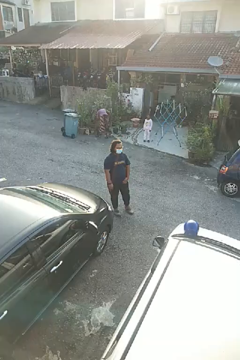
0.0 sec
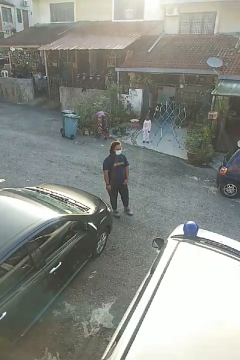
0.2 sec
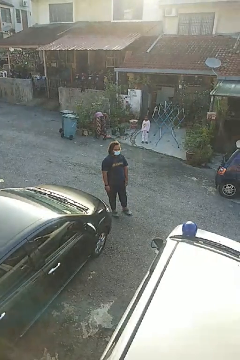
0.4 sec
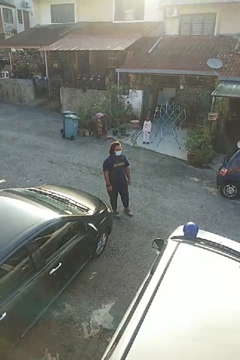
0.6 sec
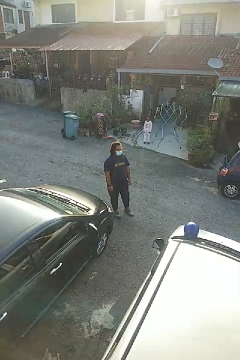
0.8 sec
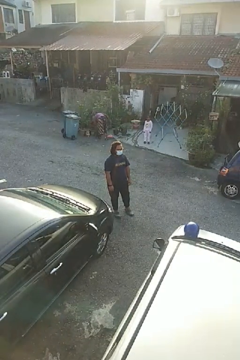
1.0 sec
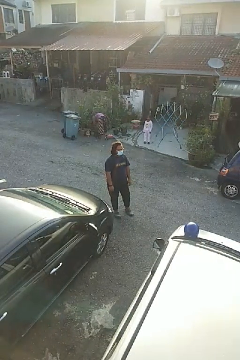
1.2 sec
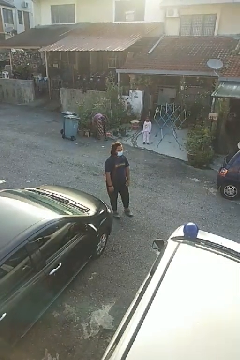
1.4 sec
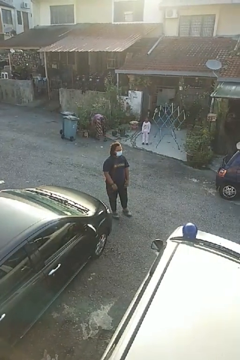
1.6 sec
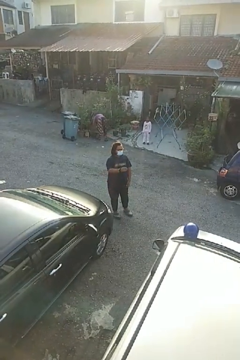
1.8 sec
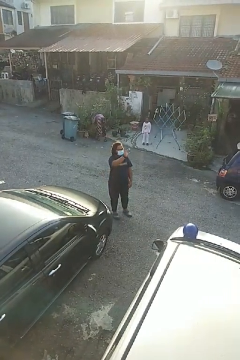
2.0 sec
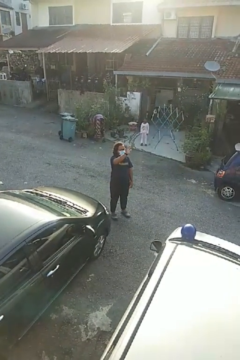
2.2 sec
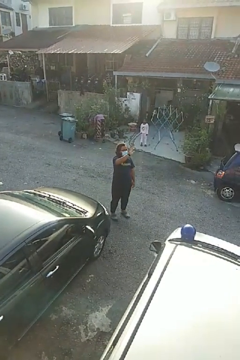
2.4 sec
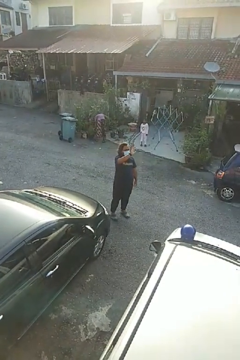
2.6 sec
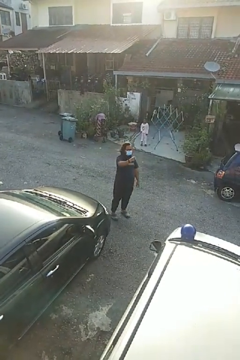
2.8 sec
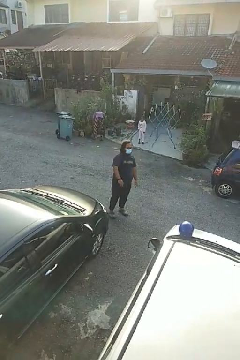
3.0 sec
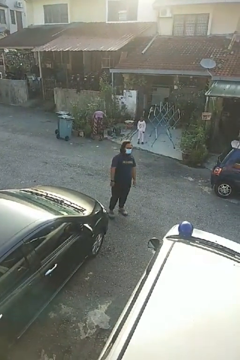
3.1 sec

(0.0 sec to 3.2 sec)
person waves at person

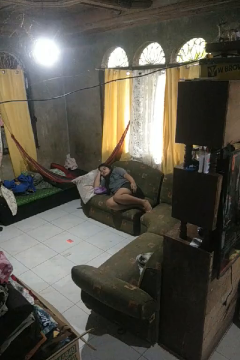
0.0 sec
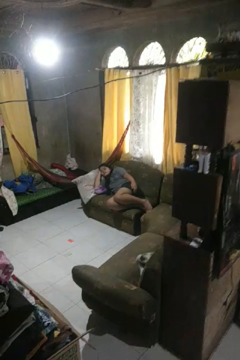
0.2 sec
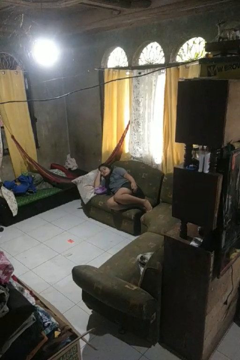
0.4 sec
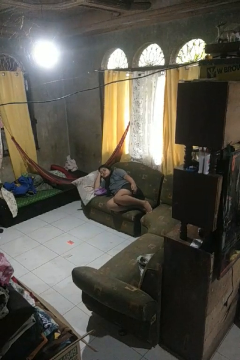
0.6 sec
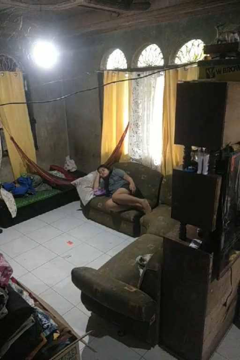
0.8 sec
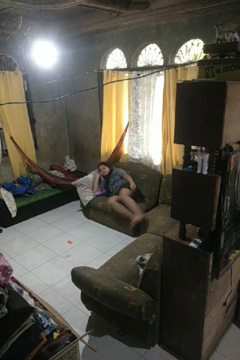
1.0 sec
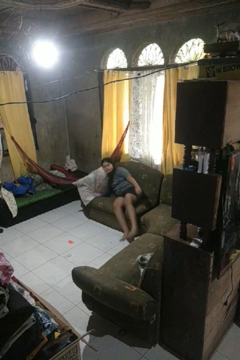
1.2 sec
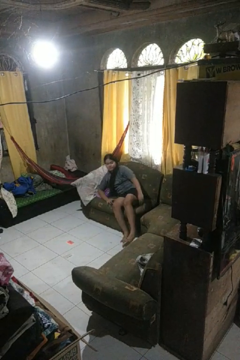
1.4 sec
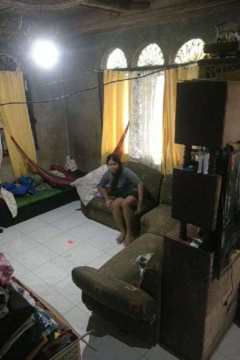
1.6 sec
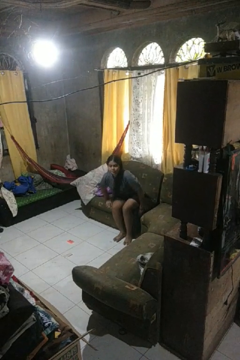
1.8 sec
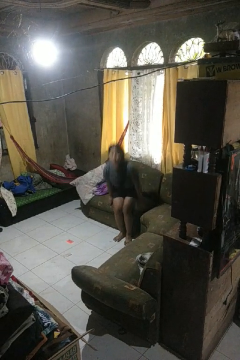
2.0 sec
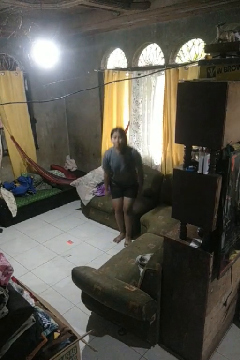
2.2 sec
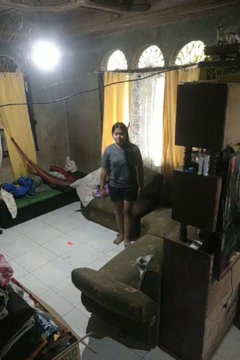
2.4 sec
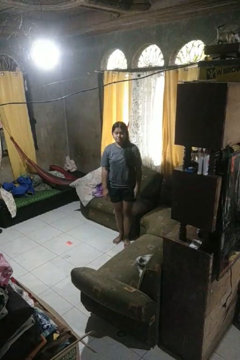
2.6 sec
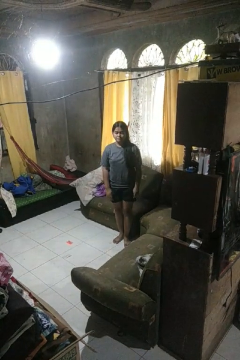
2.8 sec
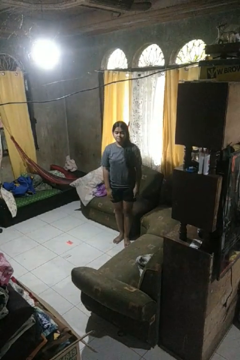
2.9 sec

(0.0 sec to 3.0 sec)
person stands up

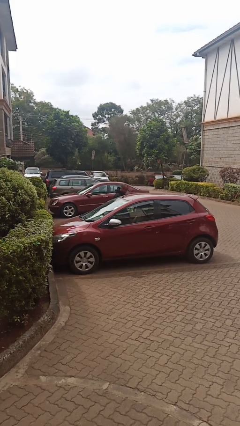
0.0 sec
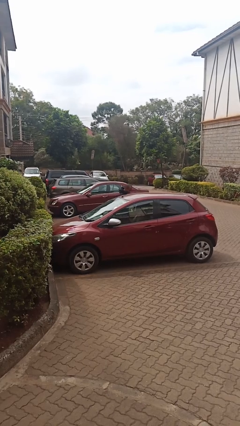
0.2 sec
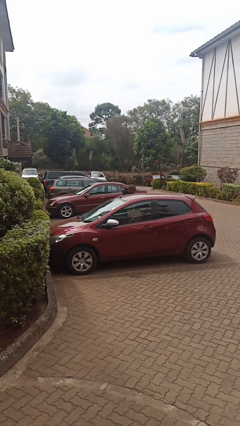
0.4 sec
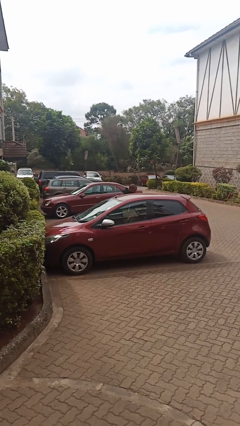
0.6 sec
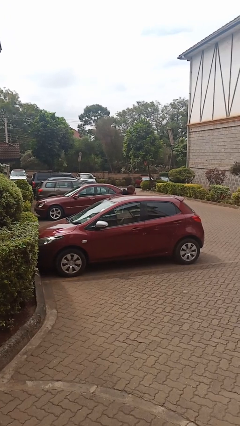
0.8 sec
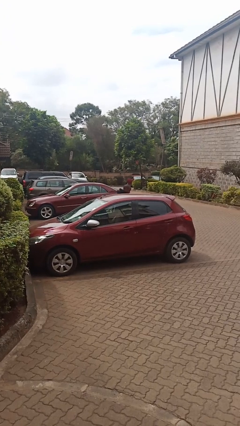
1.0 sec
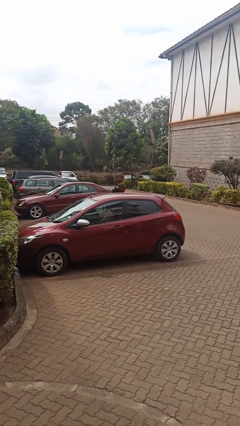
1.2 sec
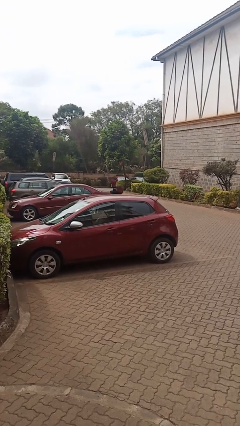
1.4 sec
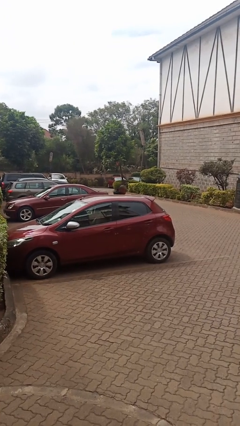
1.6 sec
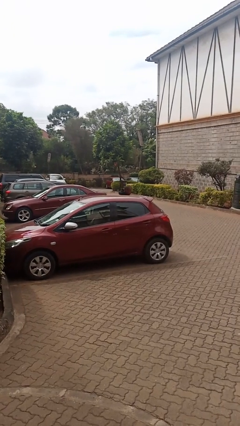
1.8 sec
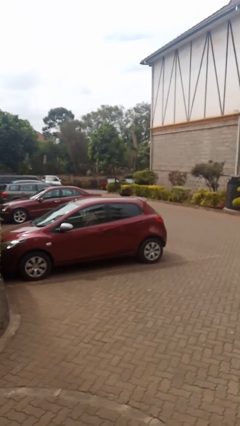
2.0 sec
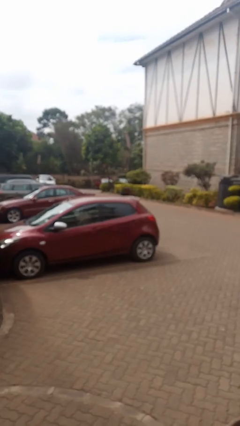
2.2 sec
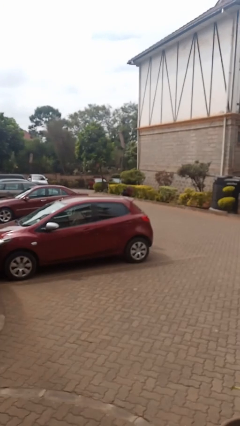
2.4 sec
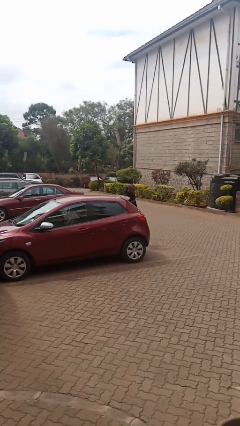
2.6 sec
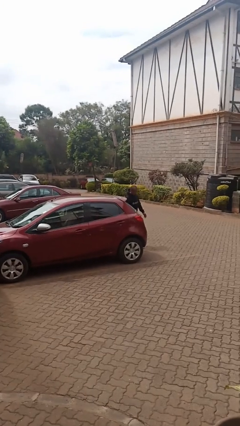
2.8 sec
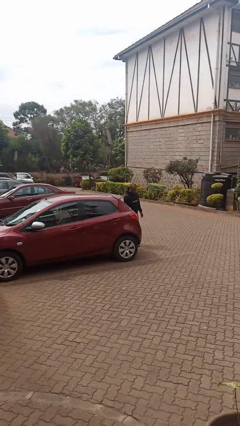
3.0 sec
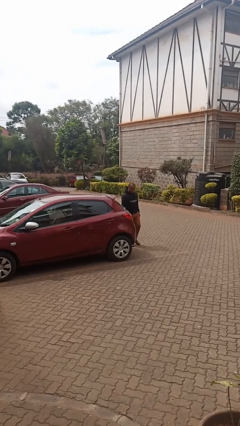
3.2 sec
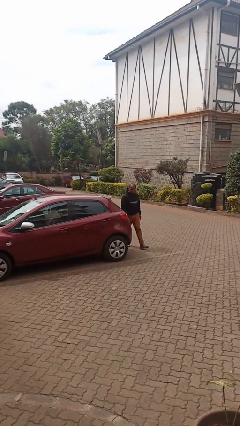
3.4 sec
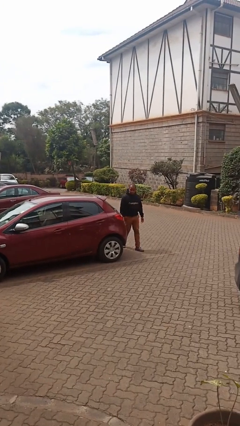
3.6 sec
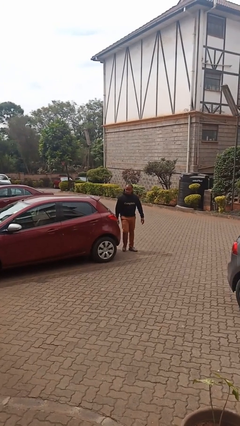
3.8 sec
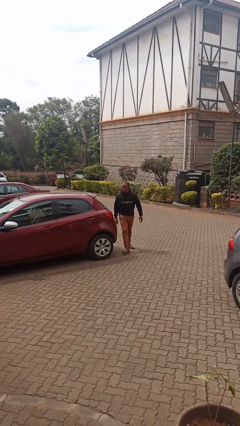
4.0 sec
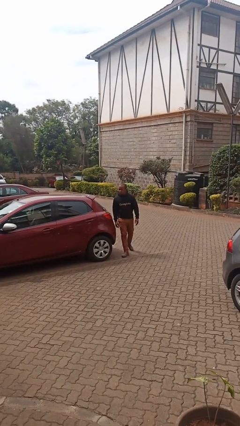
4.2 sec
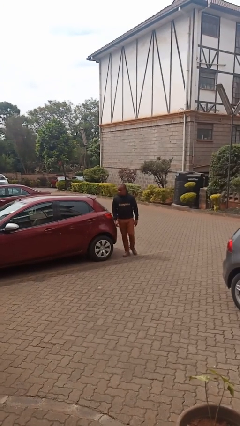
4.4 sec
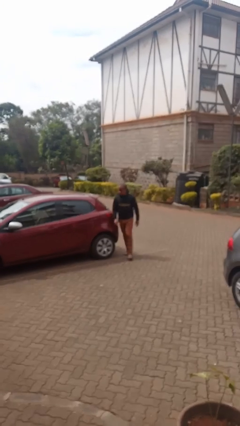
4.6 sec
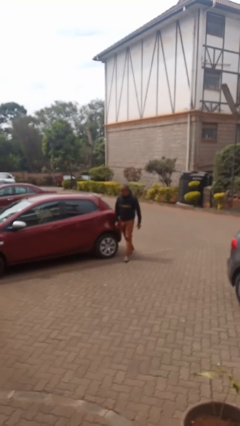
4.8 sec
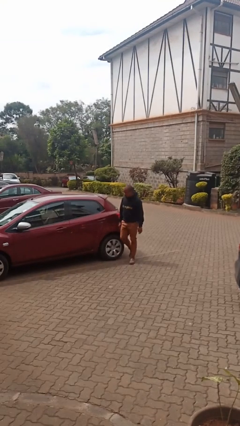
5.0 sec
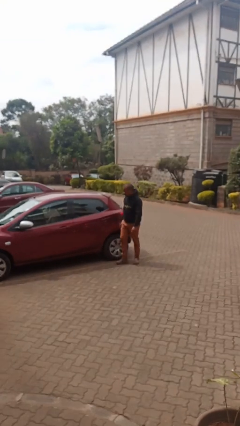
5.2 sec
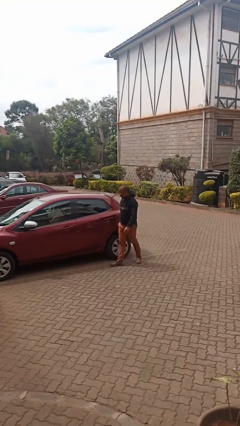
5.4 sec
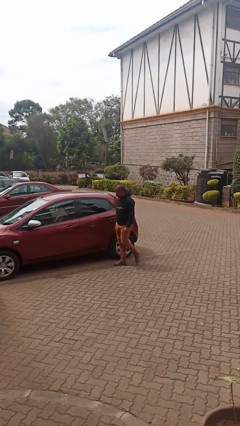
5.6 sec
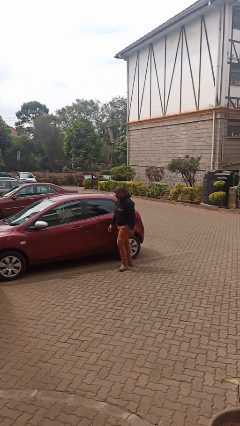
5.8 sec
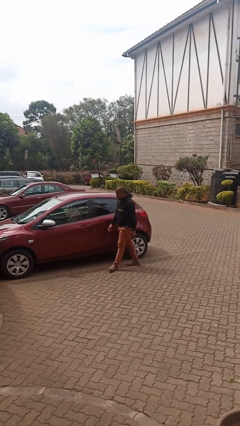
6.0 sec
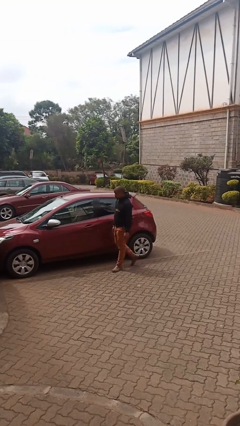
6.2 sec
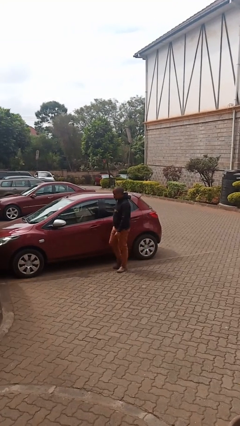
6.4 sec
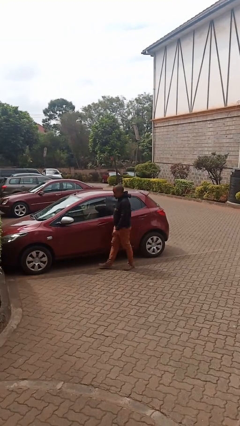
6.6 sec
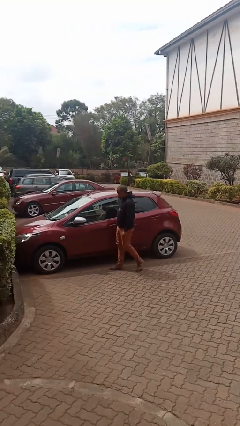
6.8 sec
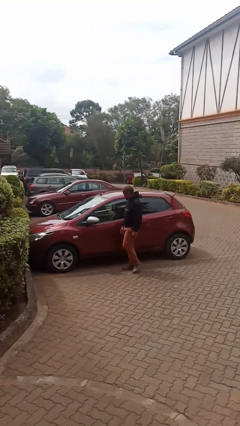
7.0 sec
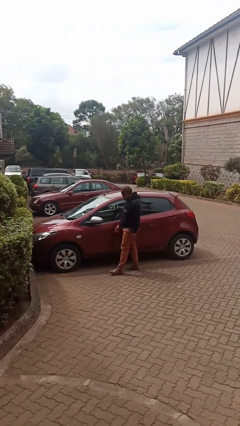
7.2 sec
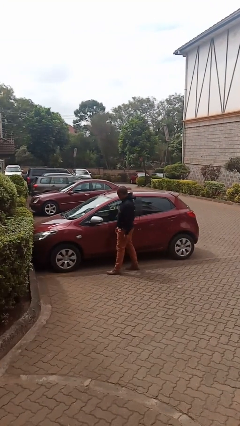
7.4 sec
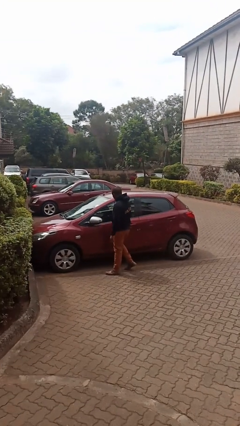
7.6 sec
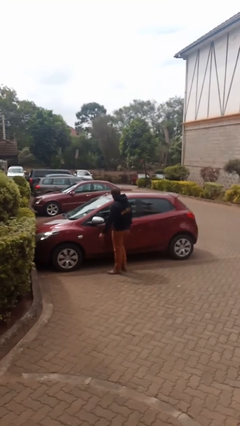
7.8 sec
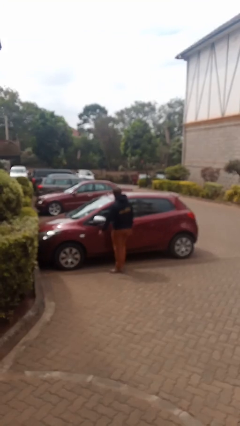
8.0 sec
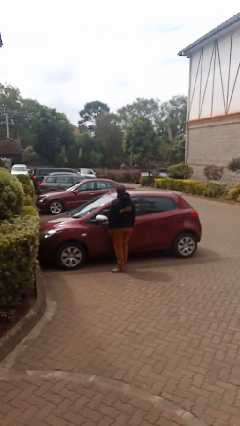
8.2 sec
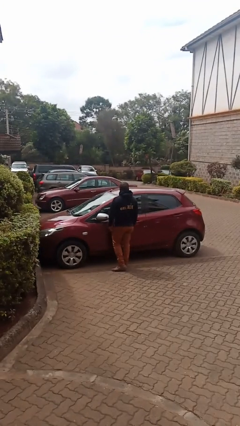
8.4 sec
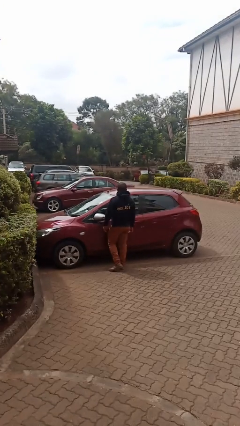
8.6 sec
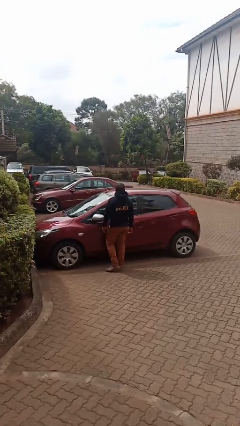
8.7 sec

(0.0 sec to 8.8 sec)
person walks around car

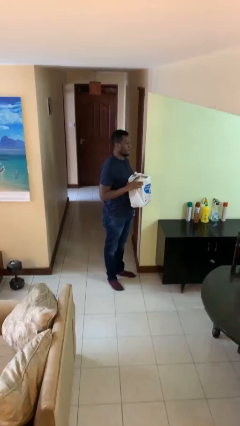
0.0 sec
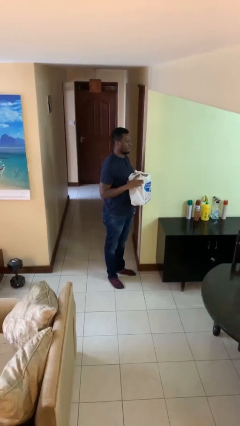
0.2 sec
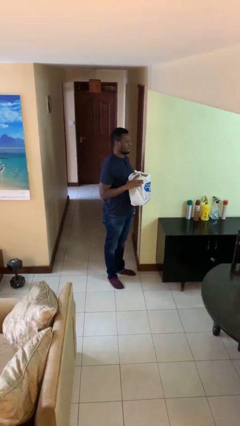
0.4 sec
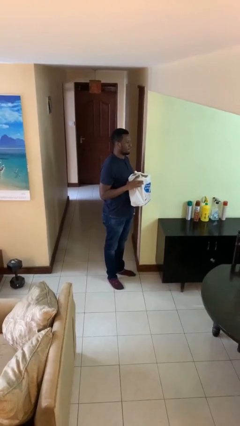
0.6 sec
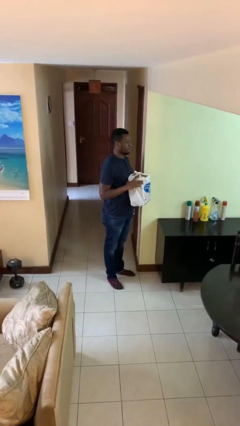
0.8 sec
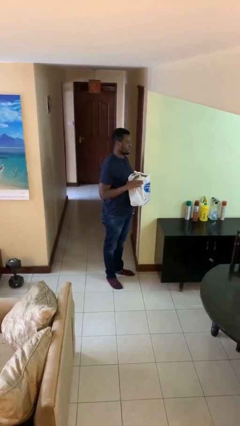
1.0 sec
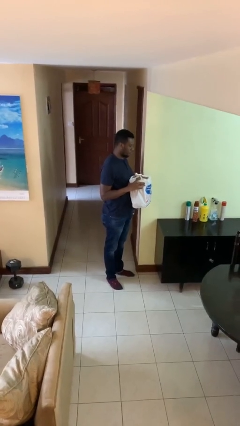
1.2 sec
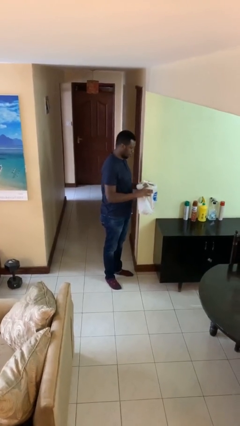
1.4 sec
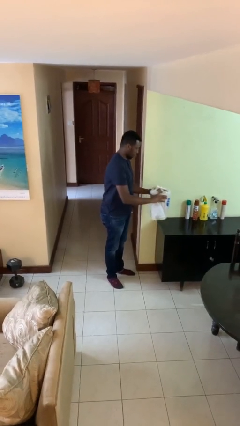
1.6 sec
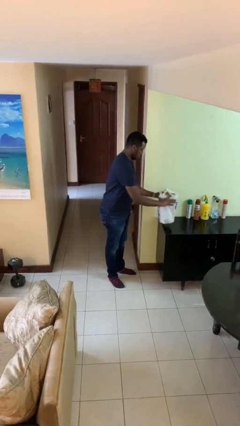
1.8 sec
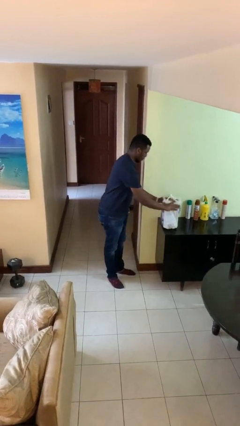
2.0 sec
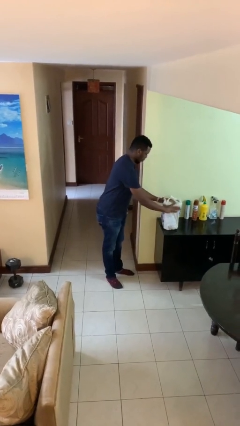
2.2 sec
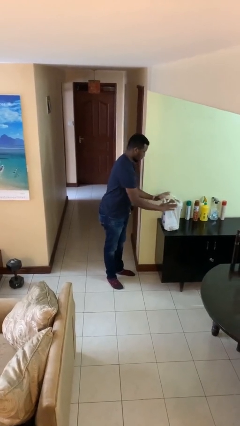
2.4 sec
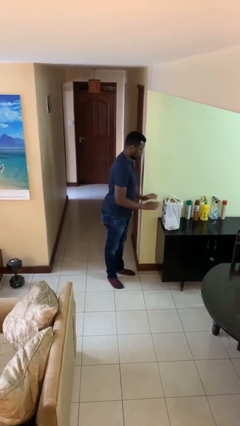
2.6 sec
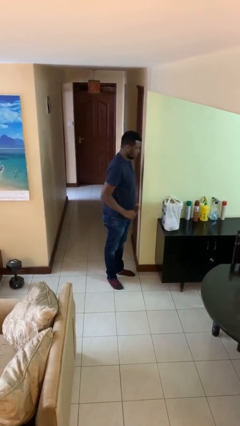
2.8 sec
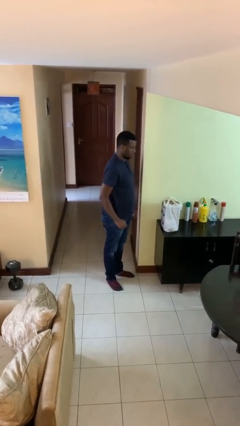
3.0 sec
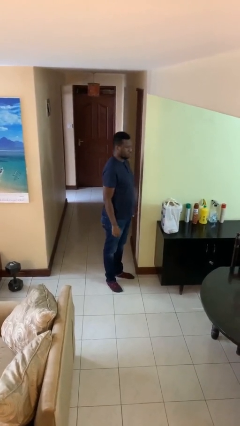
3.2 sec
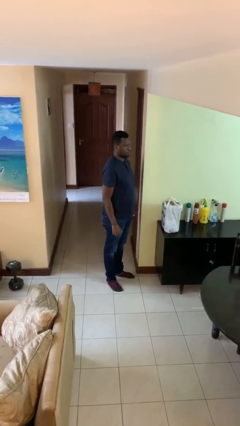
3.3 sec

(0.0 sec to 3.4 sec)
person puts down object on table

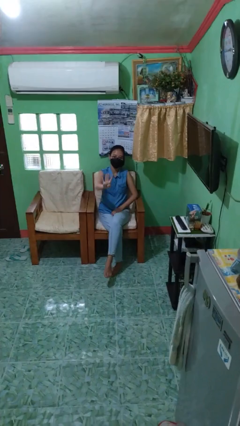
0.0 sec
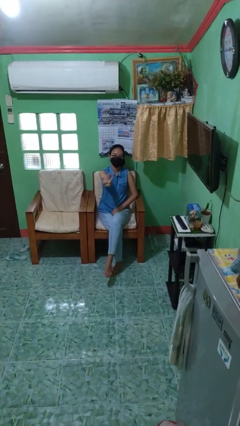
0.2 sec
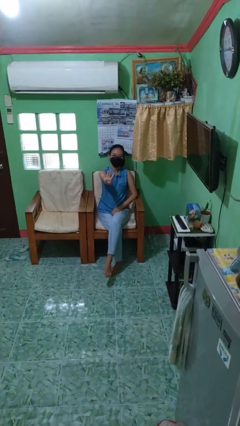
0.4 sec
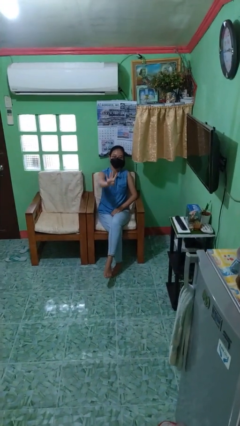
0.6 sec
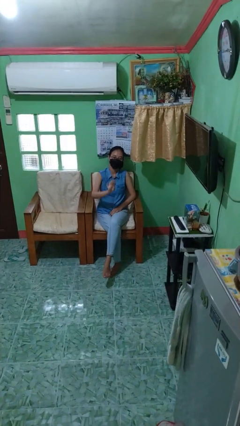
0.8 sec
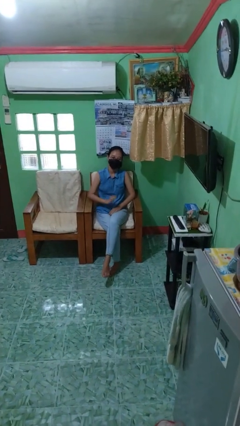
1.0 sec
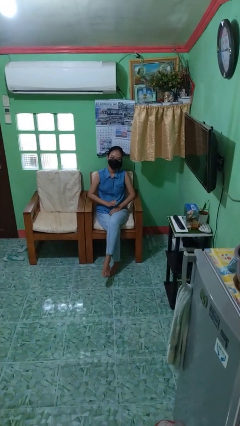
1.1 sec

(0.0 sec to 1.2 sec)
person gestures number four
